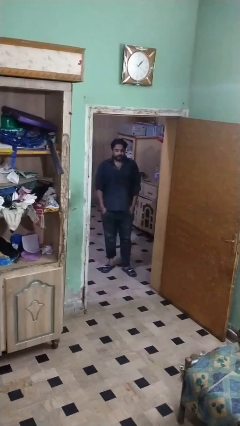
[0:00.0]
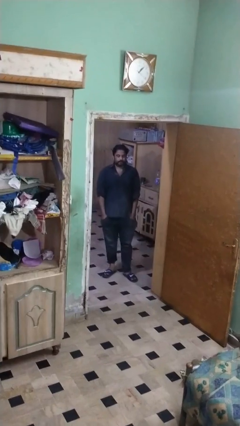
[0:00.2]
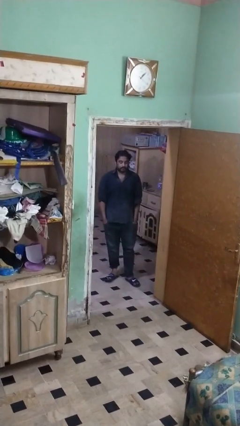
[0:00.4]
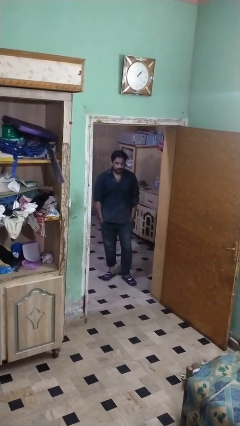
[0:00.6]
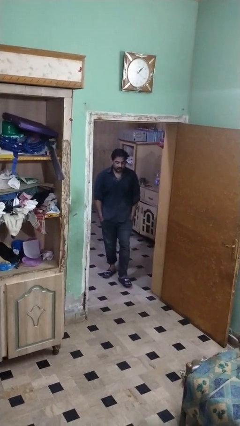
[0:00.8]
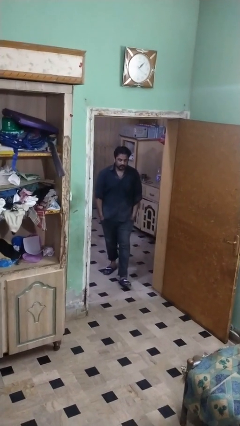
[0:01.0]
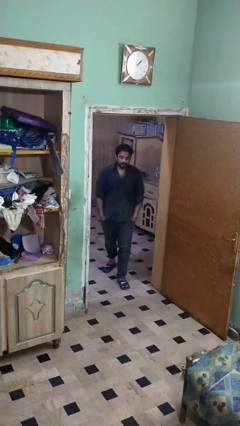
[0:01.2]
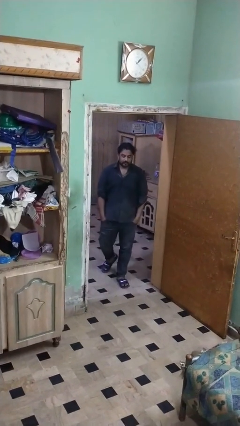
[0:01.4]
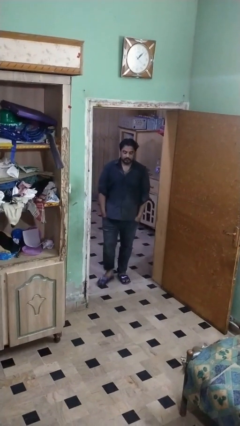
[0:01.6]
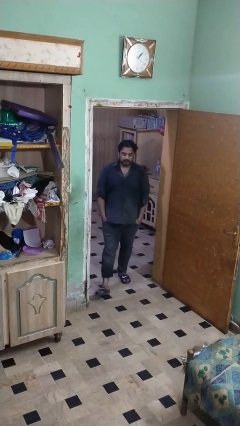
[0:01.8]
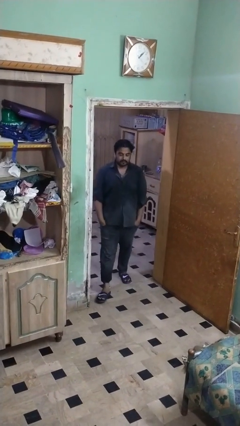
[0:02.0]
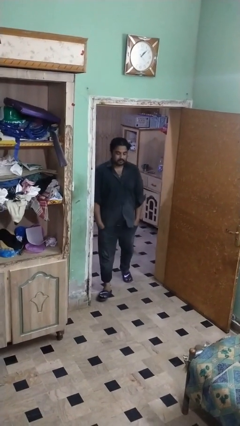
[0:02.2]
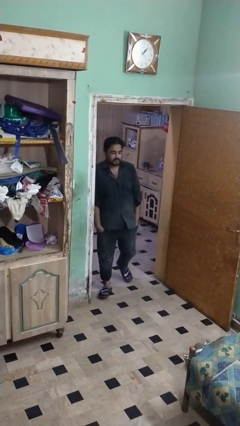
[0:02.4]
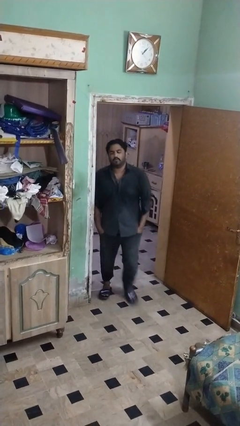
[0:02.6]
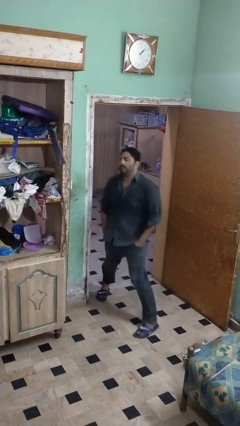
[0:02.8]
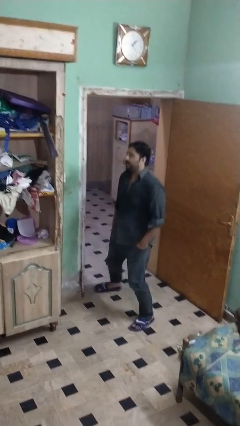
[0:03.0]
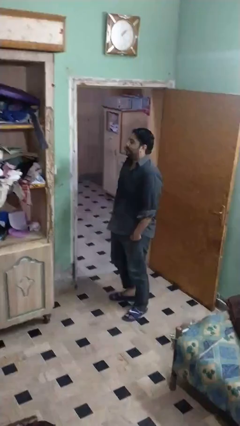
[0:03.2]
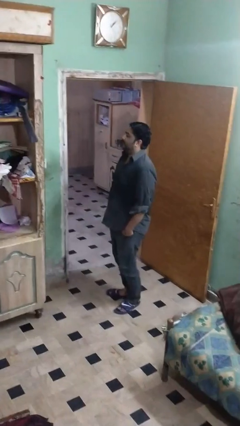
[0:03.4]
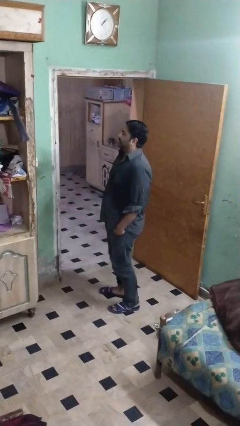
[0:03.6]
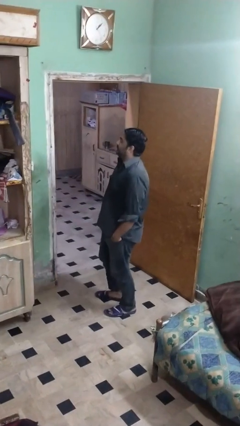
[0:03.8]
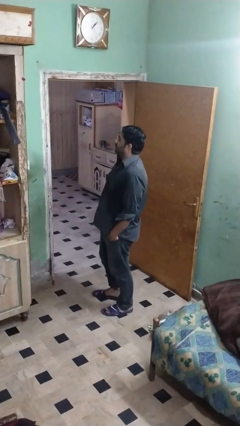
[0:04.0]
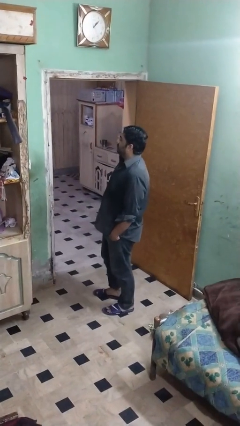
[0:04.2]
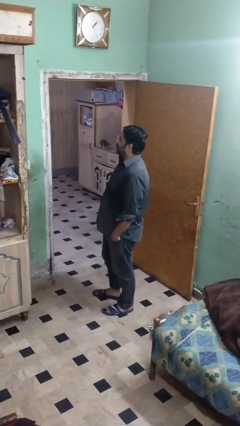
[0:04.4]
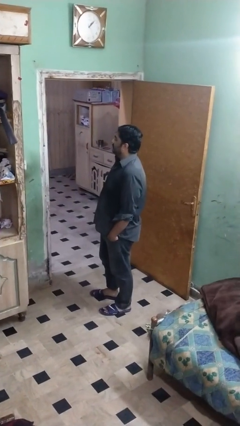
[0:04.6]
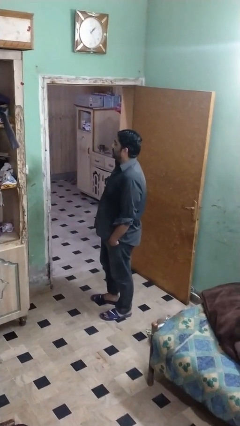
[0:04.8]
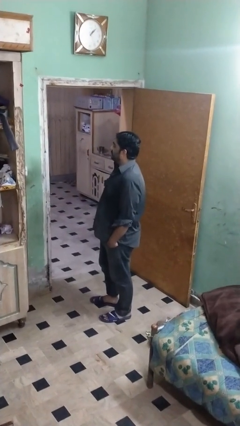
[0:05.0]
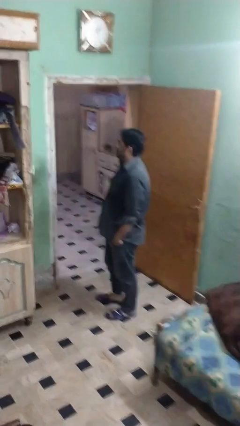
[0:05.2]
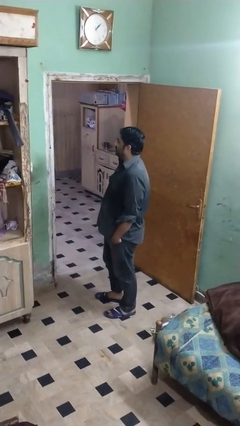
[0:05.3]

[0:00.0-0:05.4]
person bumps into wall

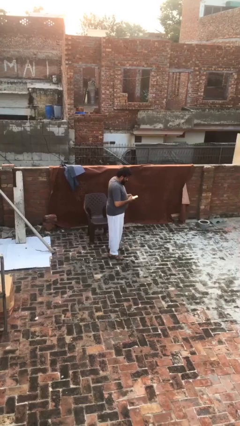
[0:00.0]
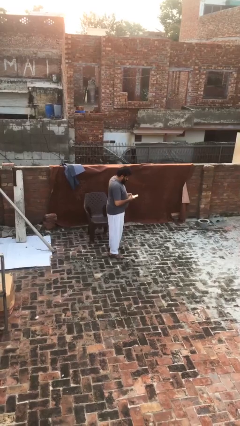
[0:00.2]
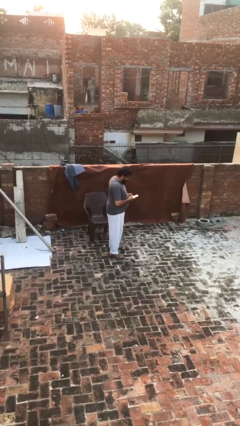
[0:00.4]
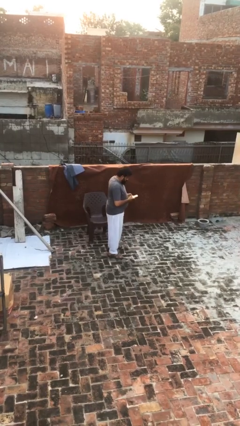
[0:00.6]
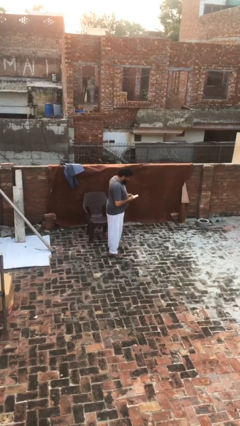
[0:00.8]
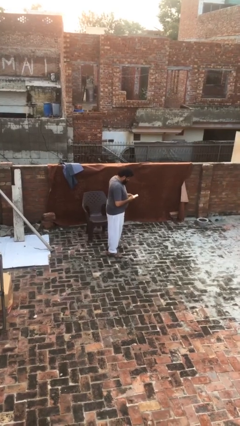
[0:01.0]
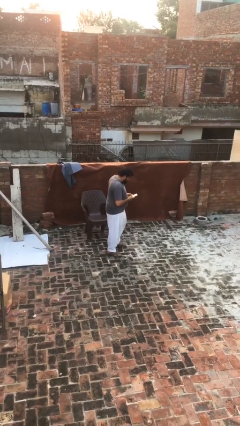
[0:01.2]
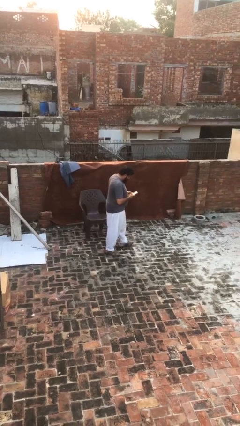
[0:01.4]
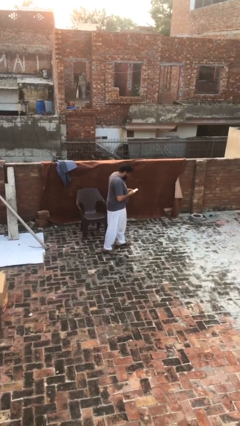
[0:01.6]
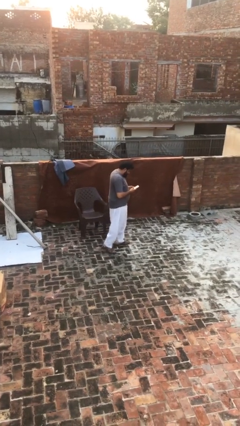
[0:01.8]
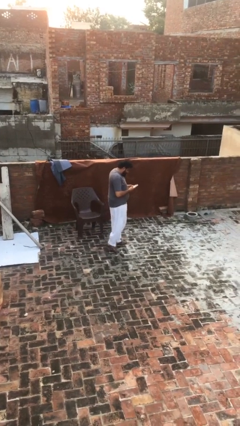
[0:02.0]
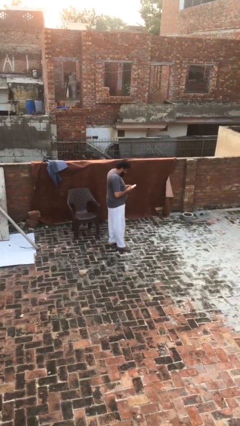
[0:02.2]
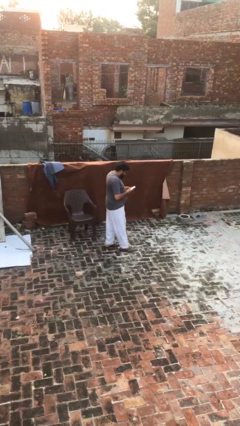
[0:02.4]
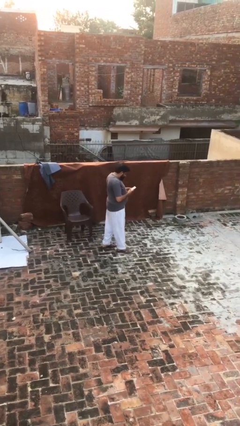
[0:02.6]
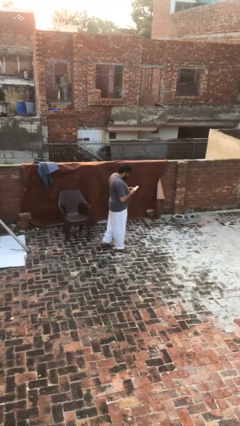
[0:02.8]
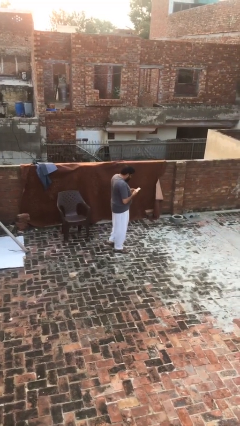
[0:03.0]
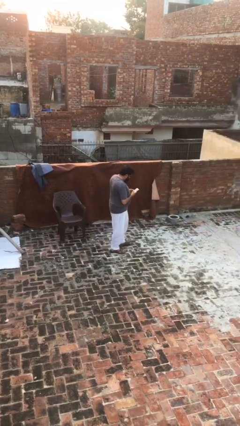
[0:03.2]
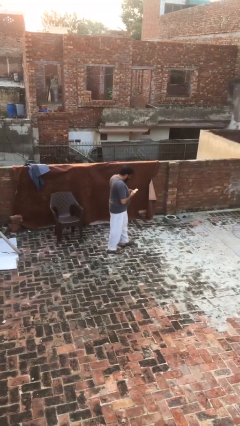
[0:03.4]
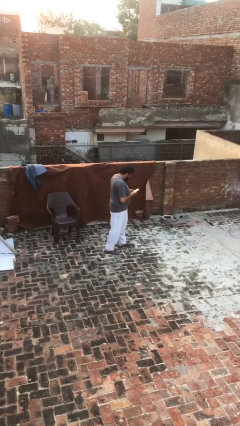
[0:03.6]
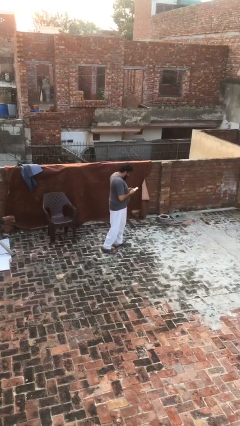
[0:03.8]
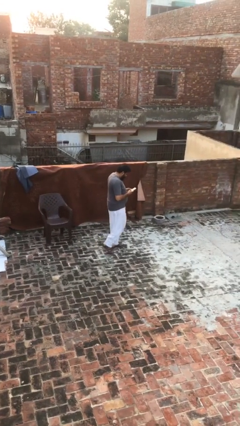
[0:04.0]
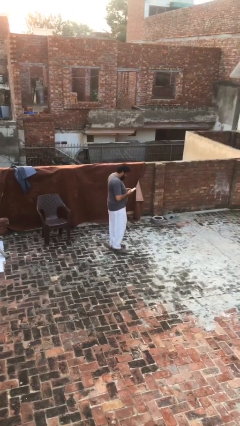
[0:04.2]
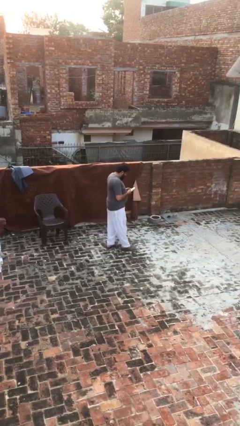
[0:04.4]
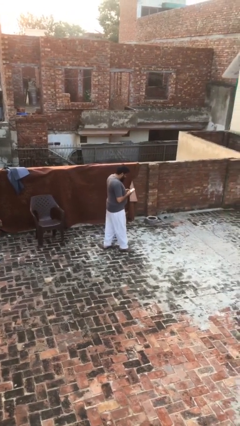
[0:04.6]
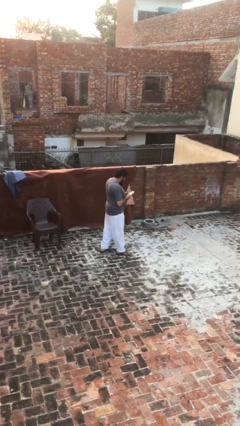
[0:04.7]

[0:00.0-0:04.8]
person texts on phone

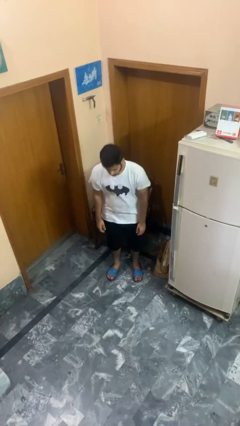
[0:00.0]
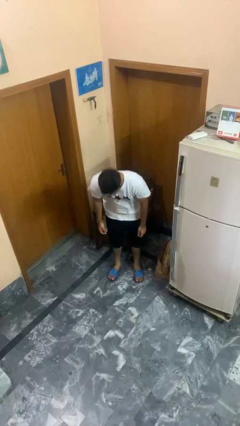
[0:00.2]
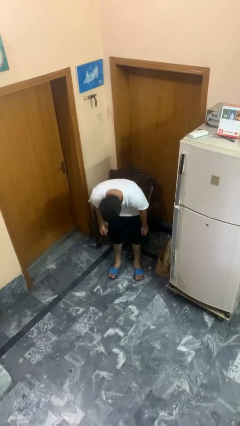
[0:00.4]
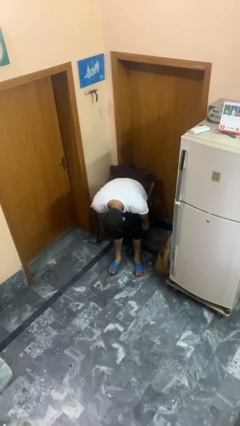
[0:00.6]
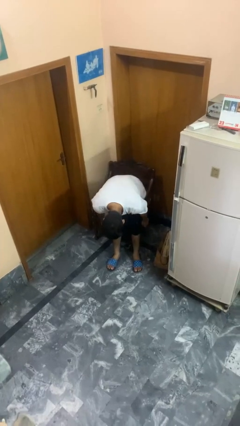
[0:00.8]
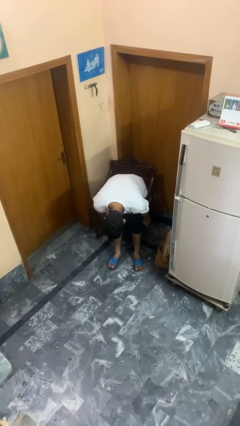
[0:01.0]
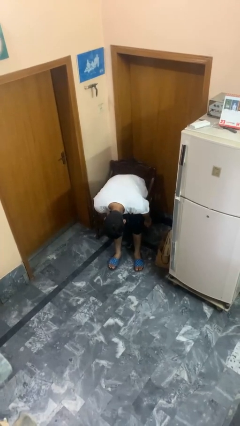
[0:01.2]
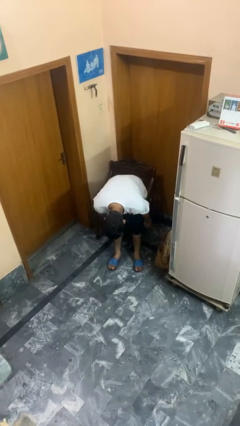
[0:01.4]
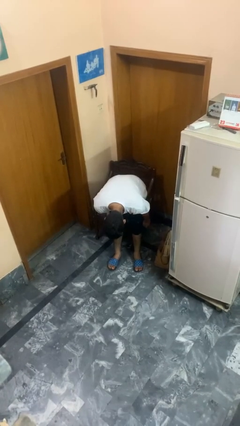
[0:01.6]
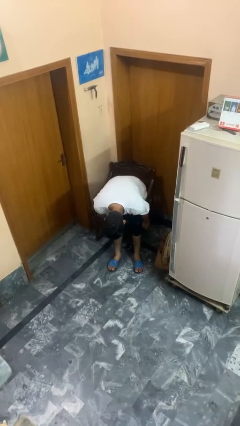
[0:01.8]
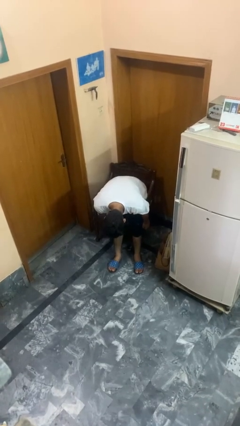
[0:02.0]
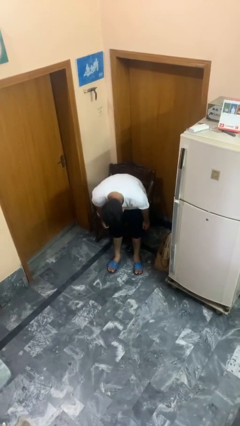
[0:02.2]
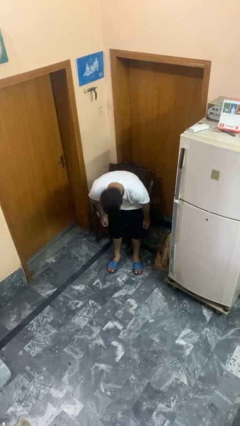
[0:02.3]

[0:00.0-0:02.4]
person bows

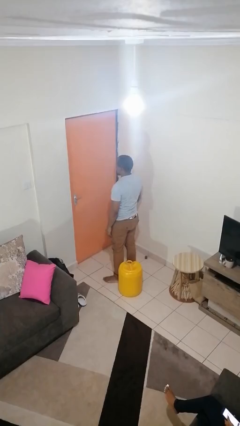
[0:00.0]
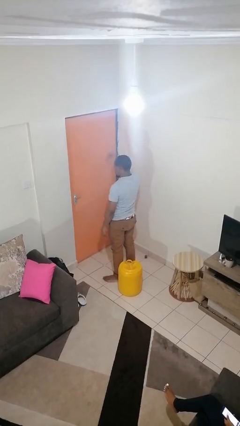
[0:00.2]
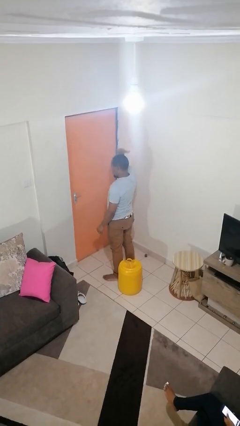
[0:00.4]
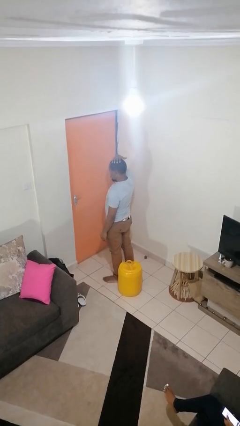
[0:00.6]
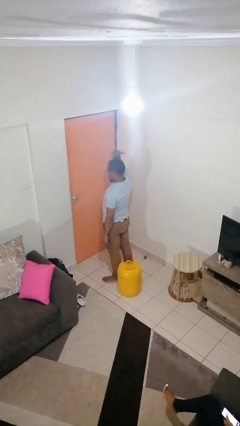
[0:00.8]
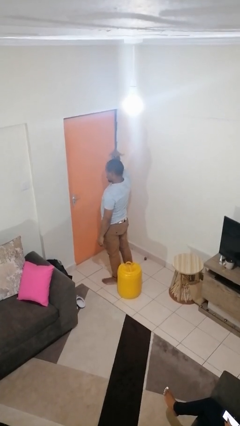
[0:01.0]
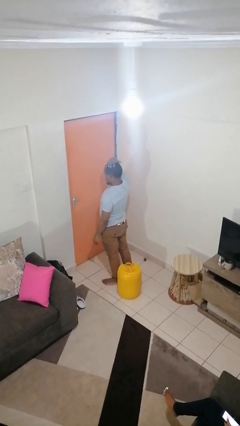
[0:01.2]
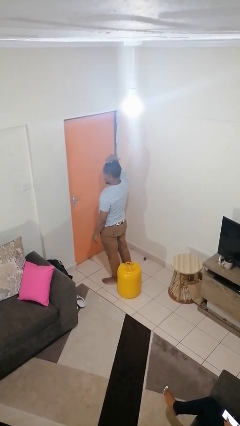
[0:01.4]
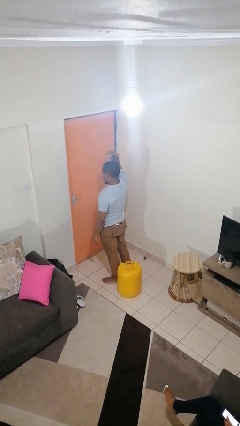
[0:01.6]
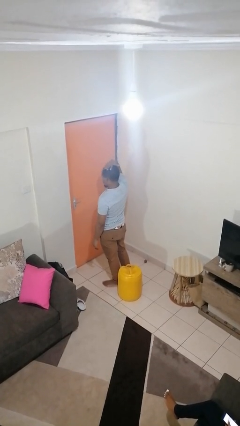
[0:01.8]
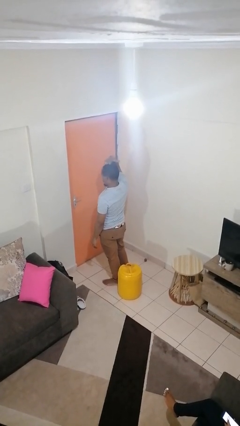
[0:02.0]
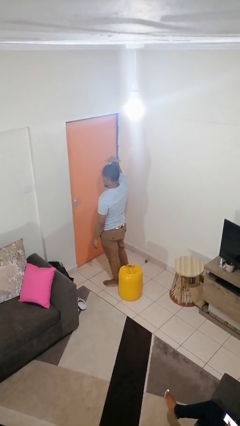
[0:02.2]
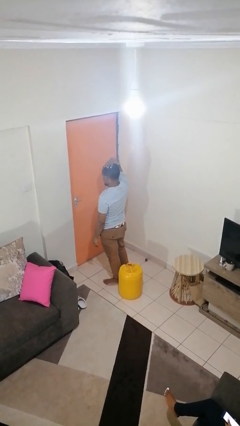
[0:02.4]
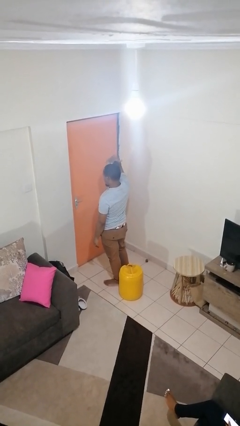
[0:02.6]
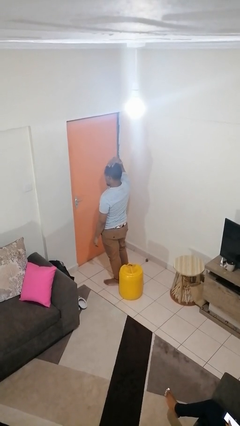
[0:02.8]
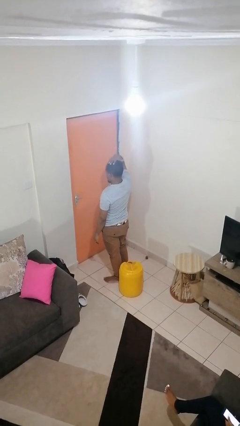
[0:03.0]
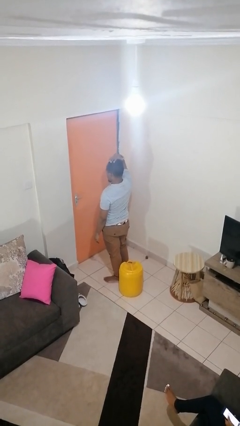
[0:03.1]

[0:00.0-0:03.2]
person pats head

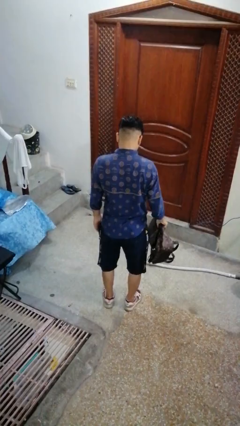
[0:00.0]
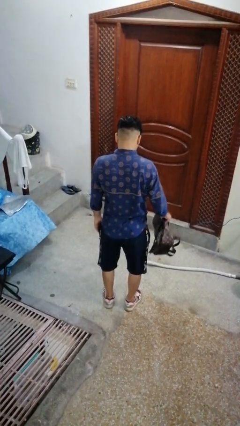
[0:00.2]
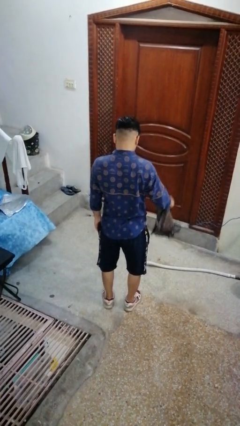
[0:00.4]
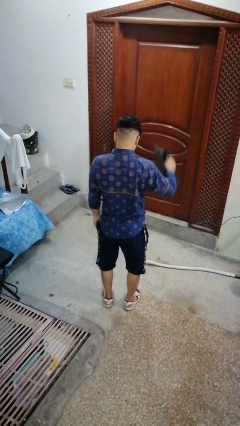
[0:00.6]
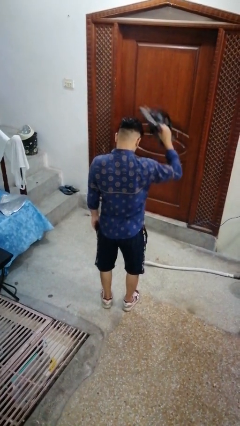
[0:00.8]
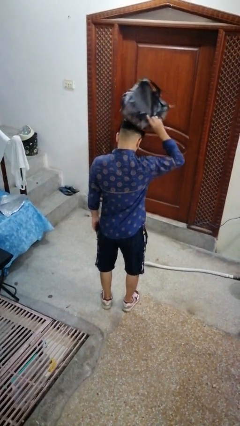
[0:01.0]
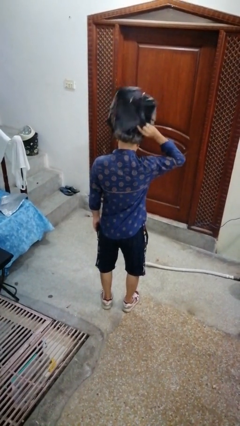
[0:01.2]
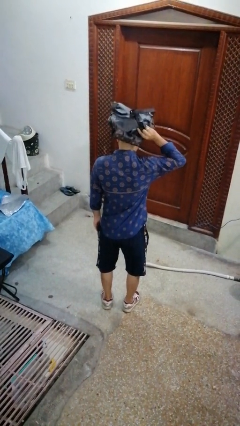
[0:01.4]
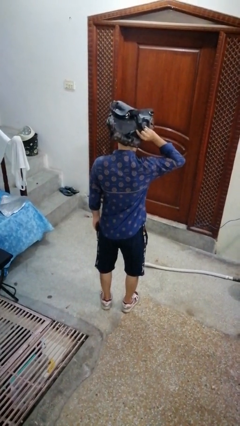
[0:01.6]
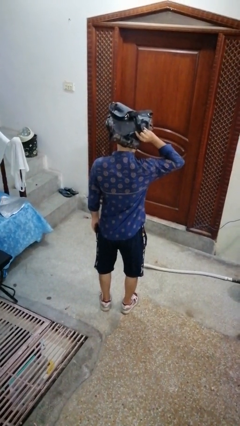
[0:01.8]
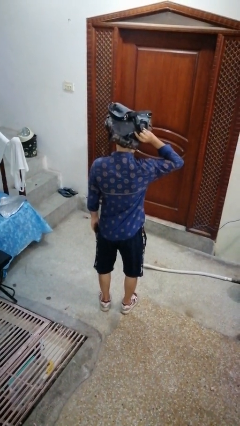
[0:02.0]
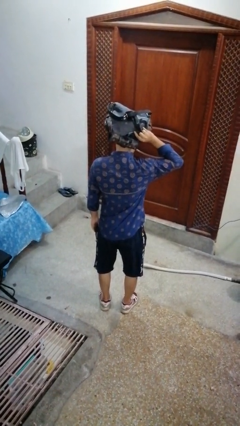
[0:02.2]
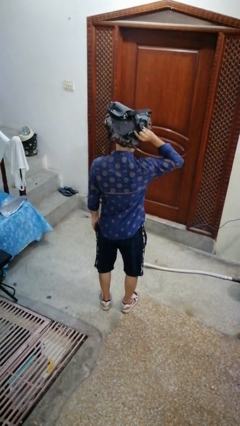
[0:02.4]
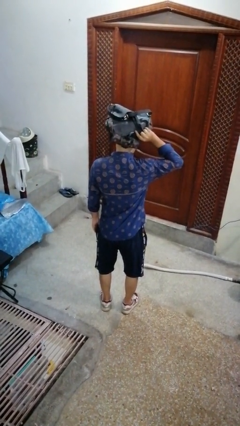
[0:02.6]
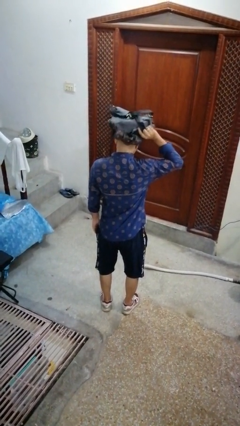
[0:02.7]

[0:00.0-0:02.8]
person holds object above head
